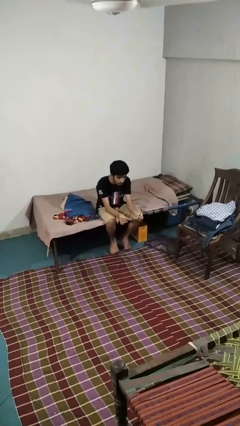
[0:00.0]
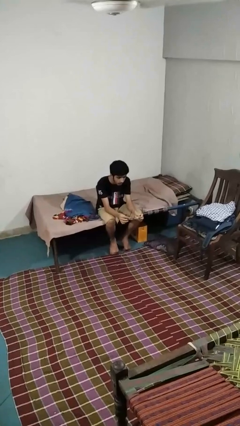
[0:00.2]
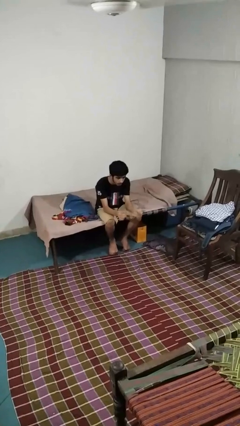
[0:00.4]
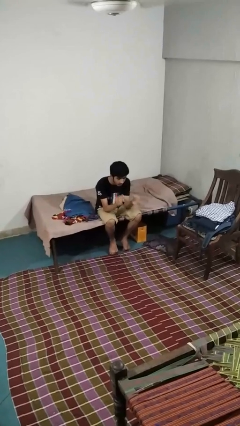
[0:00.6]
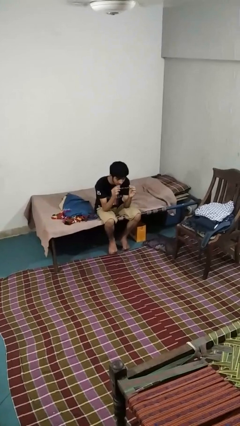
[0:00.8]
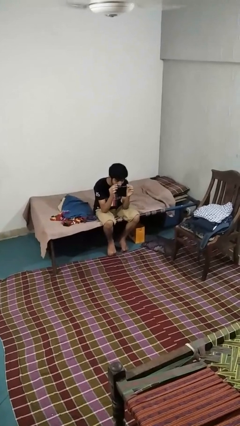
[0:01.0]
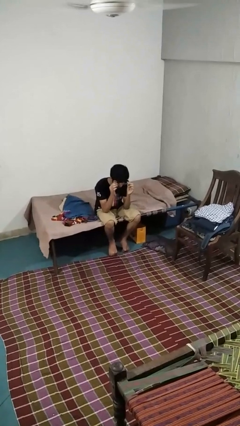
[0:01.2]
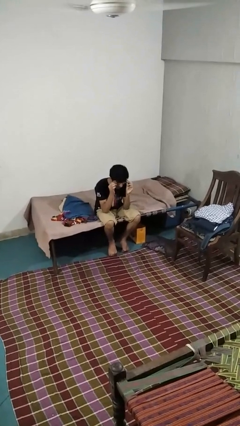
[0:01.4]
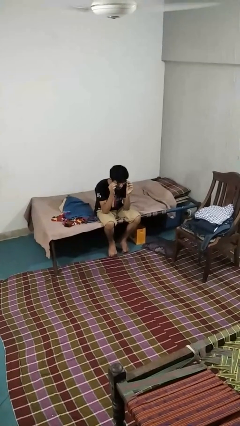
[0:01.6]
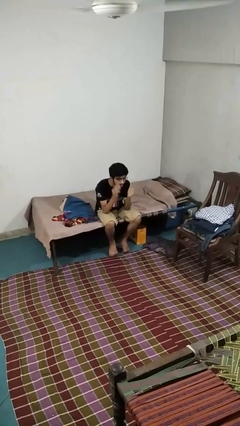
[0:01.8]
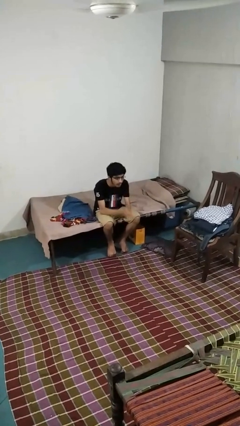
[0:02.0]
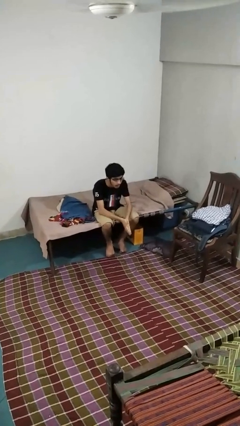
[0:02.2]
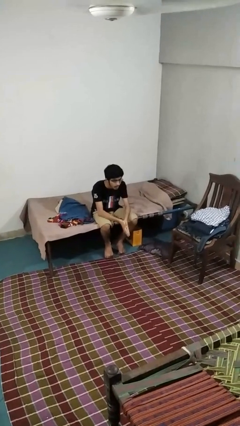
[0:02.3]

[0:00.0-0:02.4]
person puts on glasses

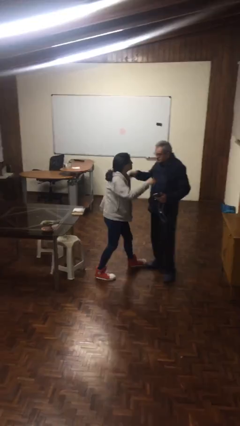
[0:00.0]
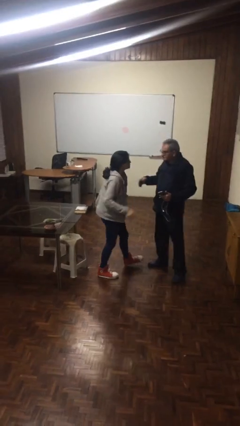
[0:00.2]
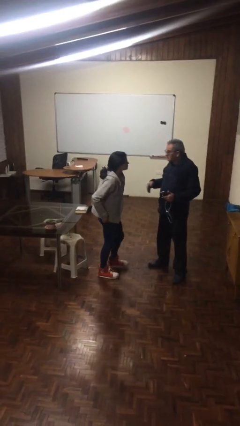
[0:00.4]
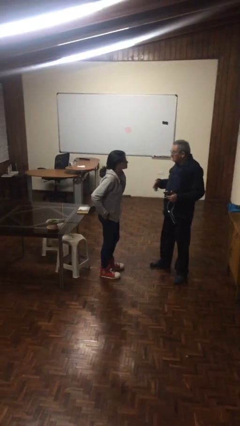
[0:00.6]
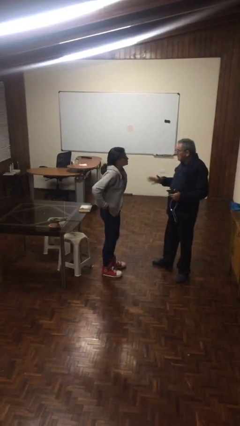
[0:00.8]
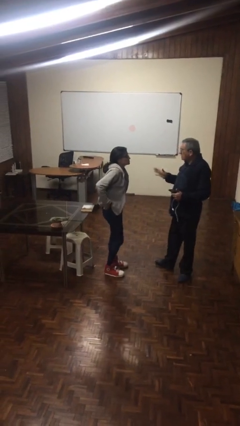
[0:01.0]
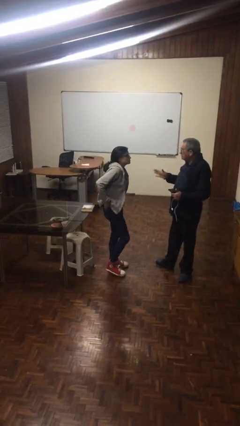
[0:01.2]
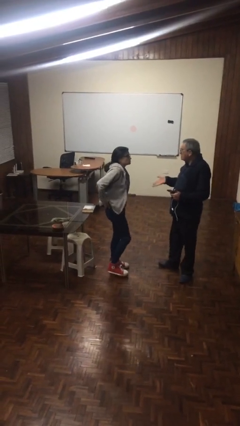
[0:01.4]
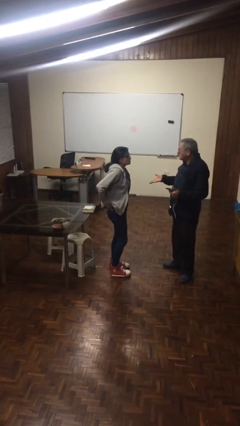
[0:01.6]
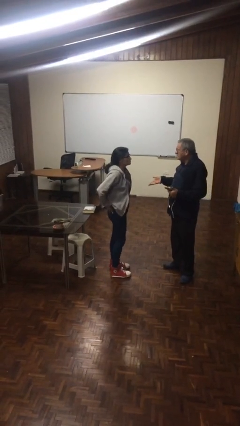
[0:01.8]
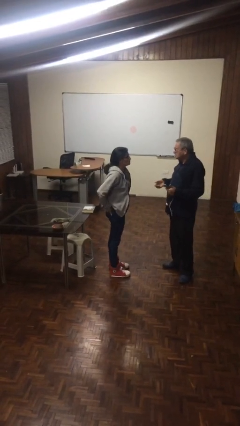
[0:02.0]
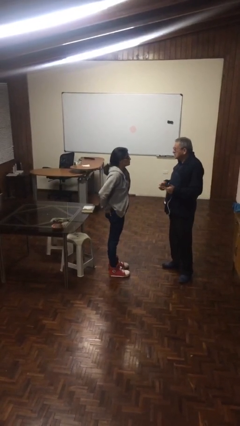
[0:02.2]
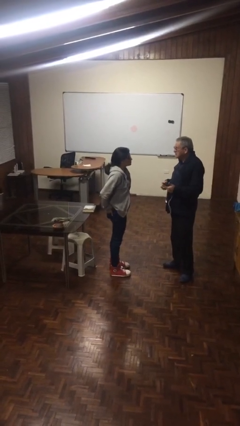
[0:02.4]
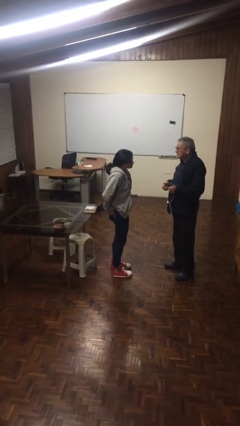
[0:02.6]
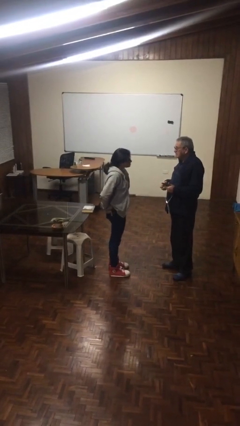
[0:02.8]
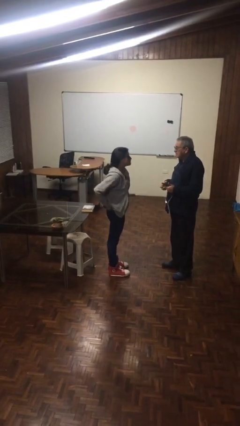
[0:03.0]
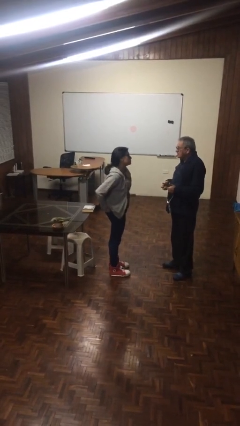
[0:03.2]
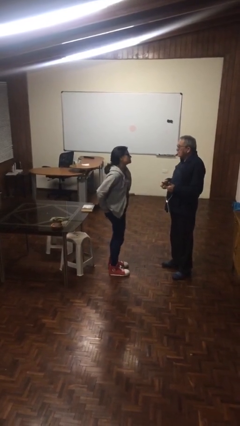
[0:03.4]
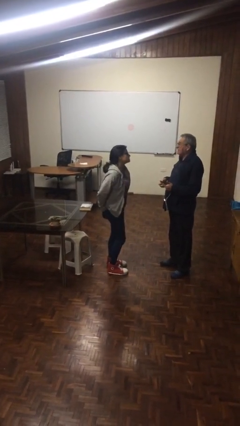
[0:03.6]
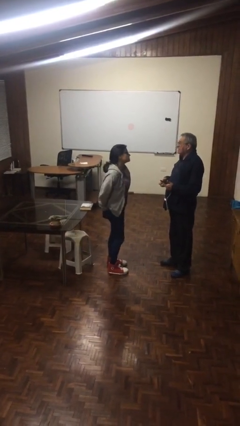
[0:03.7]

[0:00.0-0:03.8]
person talks to person

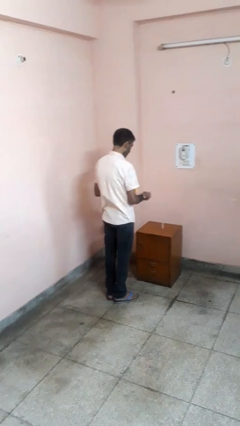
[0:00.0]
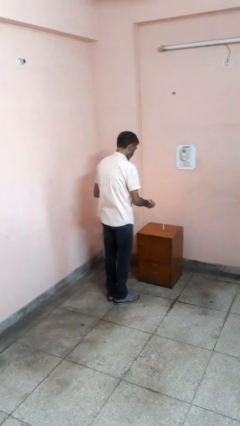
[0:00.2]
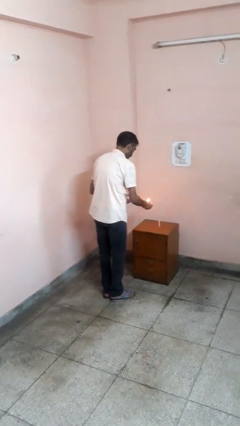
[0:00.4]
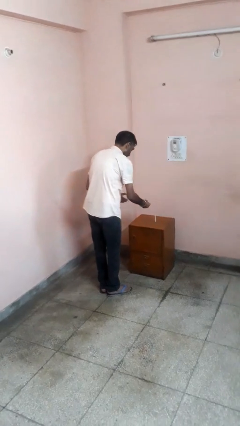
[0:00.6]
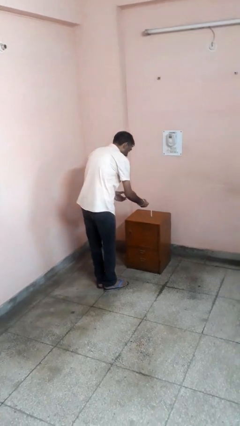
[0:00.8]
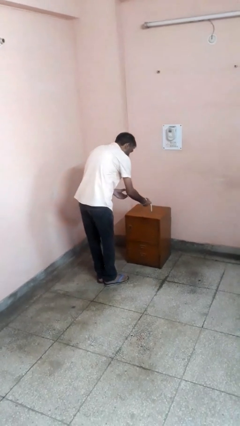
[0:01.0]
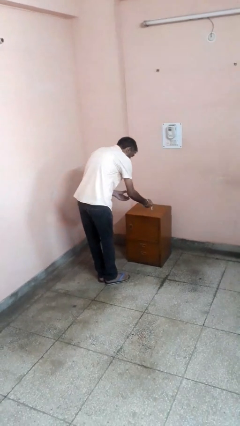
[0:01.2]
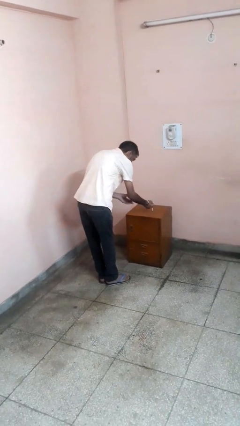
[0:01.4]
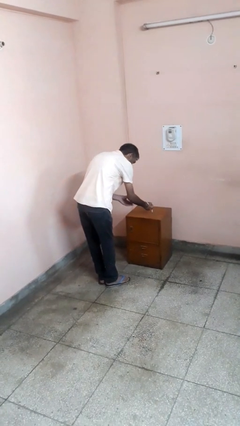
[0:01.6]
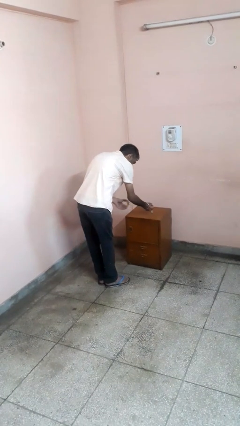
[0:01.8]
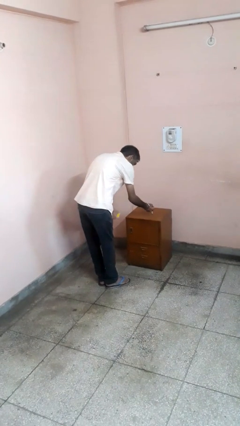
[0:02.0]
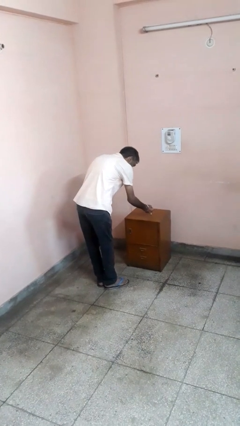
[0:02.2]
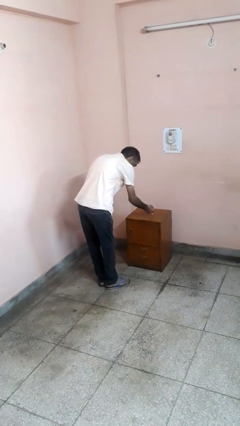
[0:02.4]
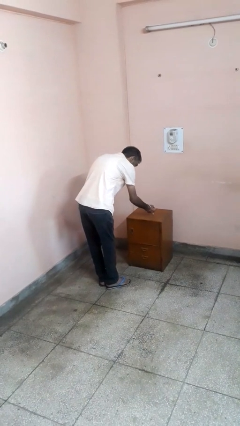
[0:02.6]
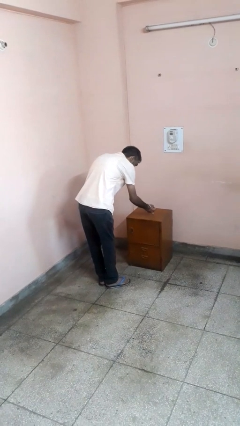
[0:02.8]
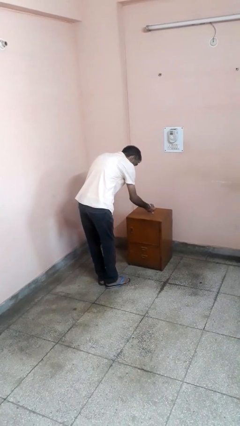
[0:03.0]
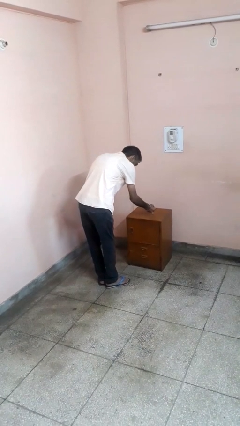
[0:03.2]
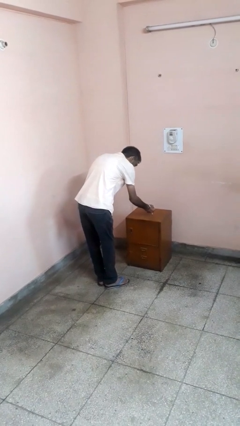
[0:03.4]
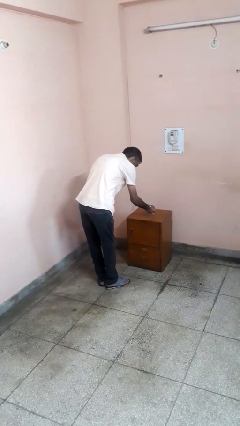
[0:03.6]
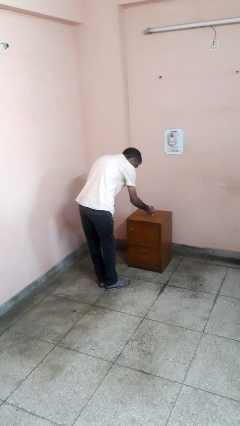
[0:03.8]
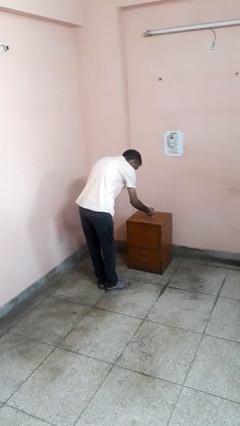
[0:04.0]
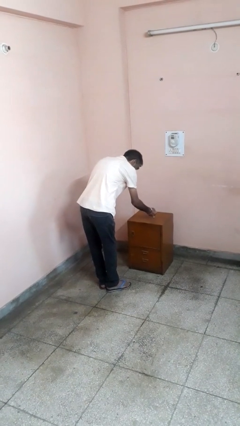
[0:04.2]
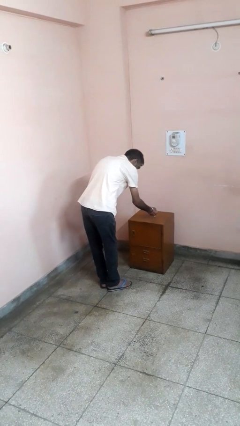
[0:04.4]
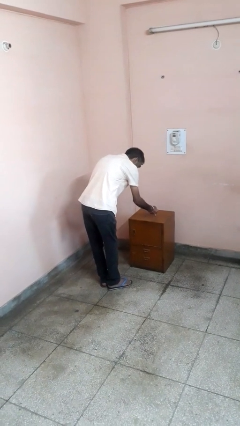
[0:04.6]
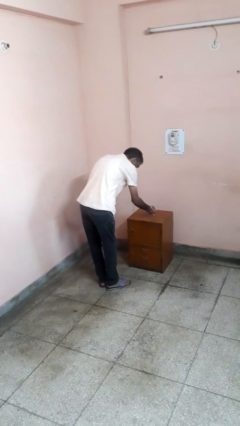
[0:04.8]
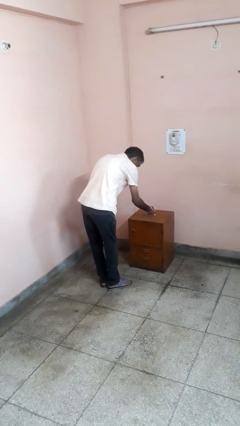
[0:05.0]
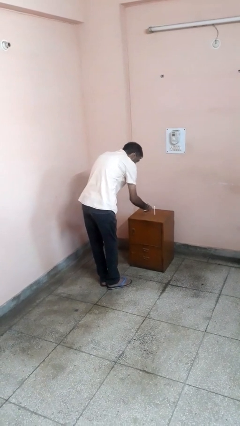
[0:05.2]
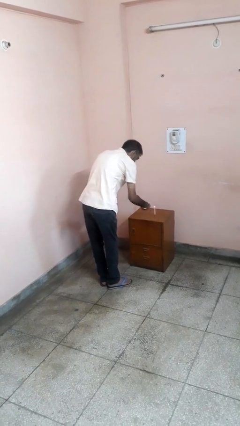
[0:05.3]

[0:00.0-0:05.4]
person lights candle

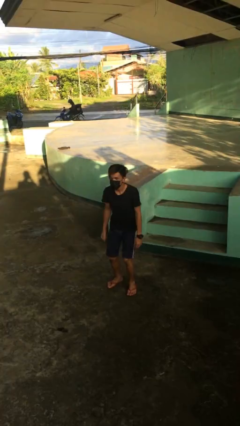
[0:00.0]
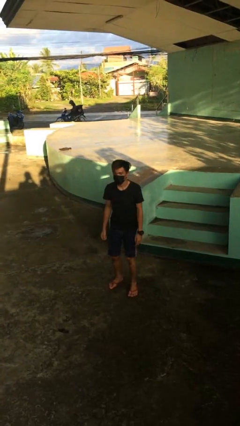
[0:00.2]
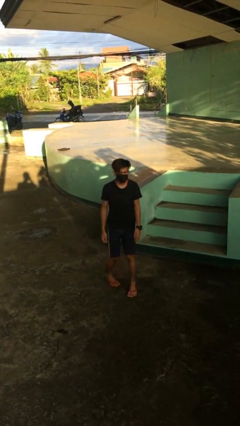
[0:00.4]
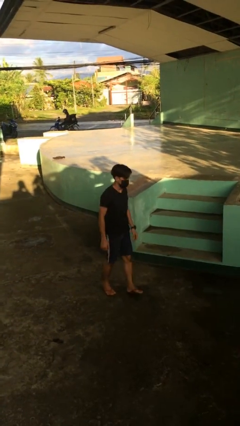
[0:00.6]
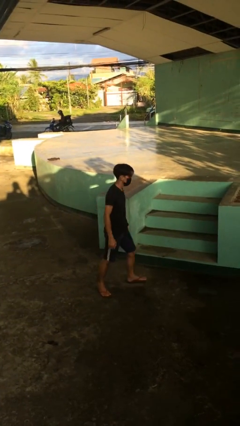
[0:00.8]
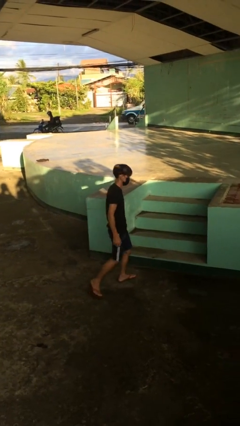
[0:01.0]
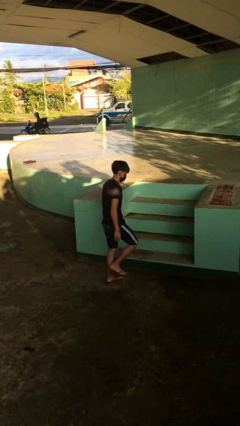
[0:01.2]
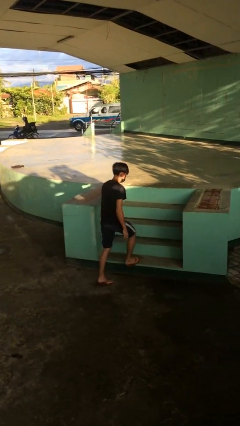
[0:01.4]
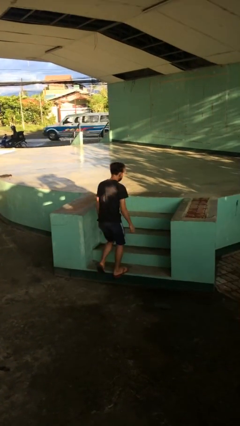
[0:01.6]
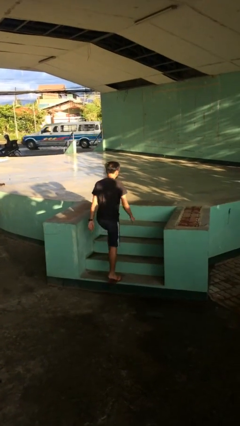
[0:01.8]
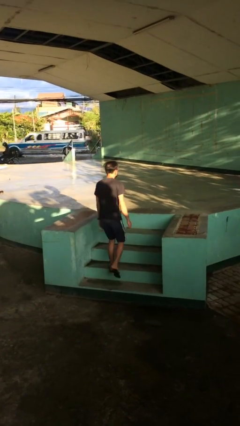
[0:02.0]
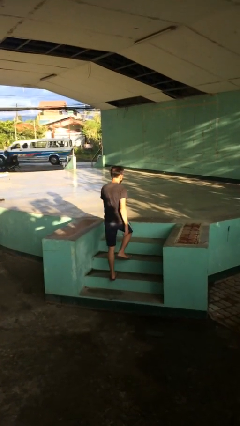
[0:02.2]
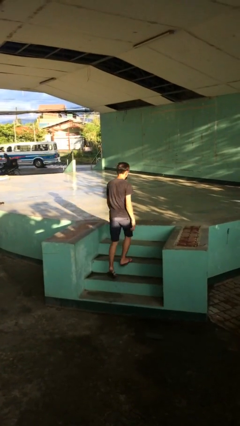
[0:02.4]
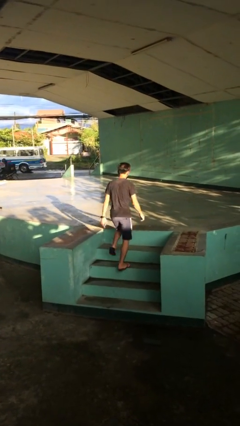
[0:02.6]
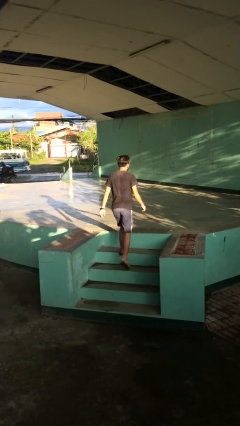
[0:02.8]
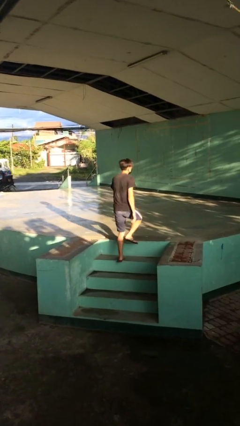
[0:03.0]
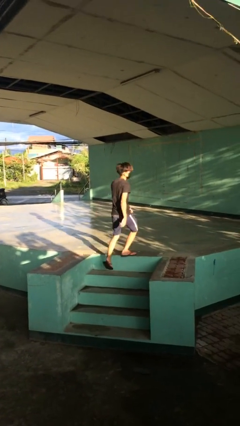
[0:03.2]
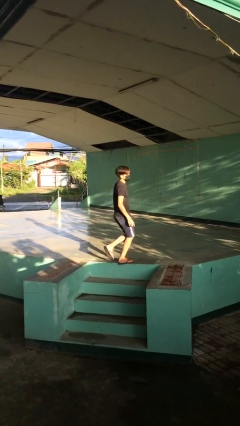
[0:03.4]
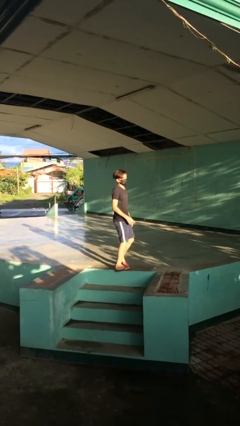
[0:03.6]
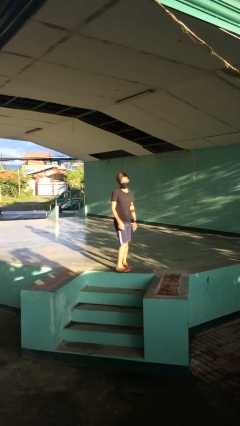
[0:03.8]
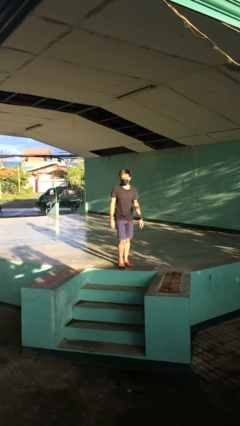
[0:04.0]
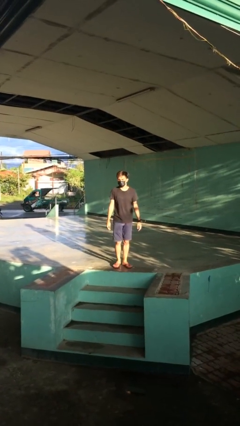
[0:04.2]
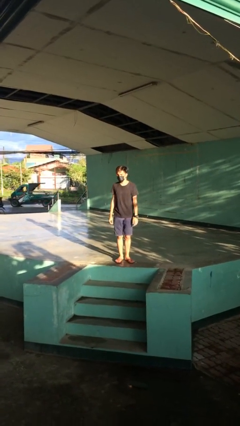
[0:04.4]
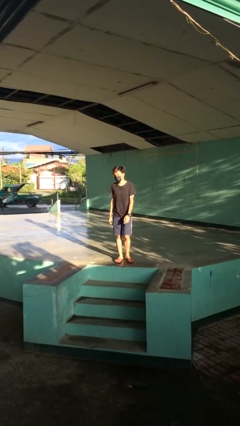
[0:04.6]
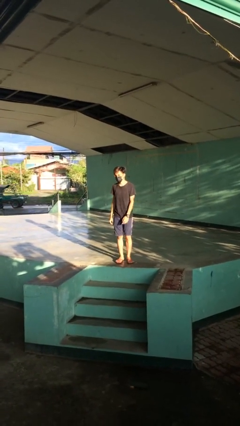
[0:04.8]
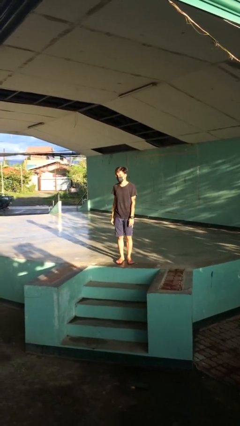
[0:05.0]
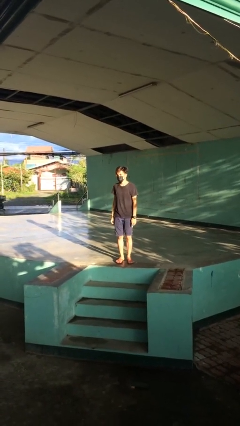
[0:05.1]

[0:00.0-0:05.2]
person climbs up stairs

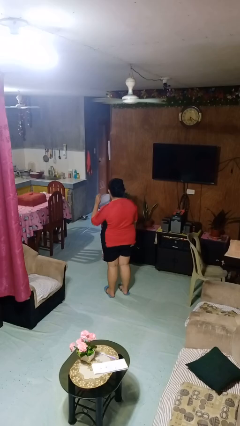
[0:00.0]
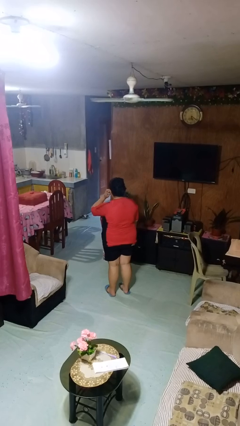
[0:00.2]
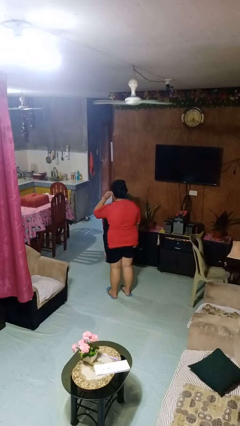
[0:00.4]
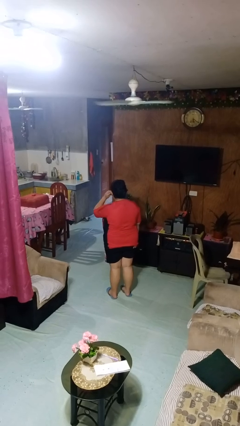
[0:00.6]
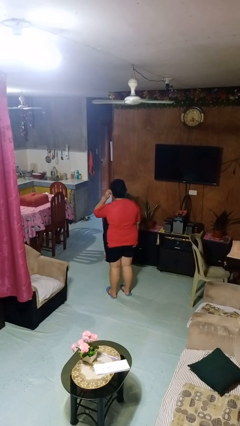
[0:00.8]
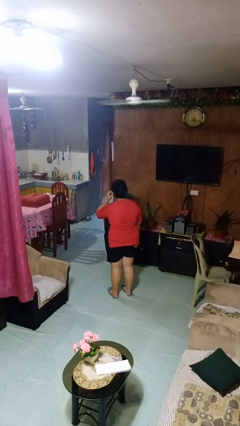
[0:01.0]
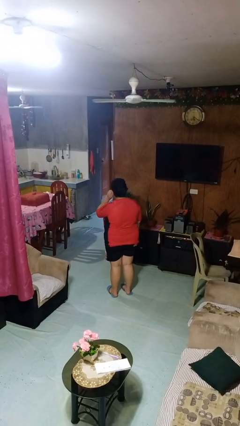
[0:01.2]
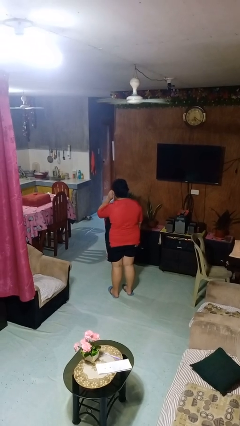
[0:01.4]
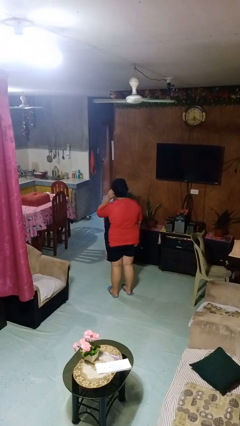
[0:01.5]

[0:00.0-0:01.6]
person touches earlobe
